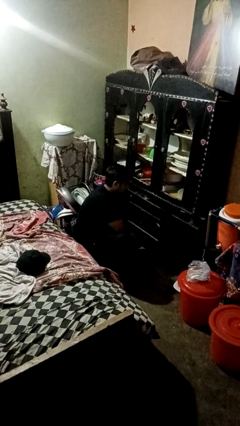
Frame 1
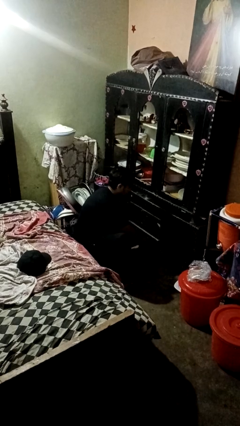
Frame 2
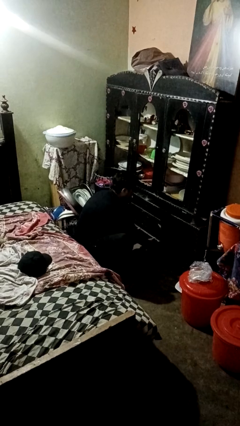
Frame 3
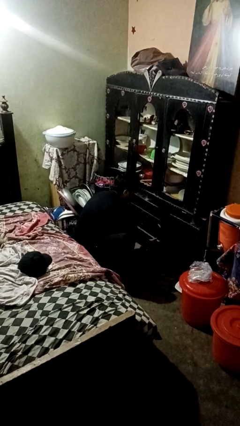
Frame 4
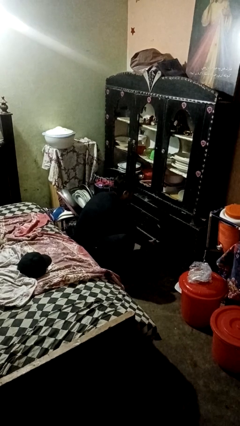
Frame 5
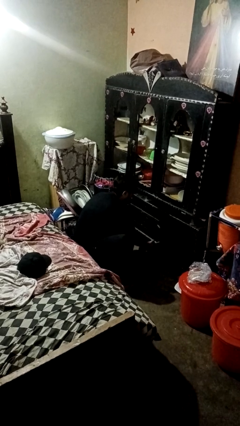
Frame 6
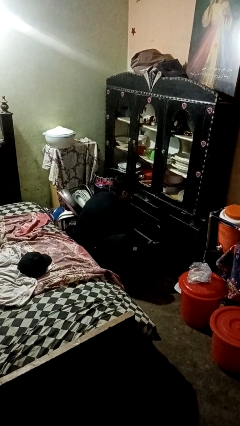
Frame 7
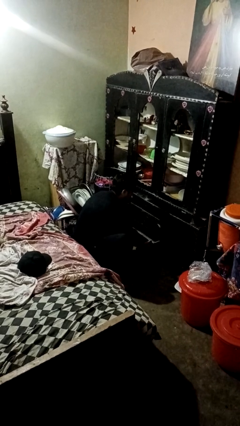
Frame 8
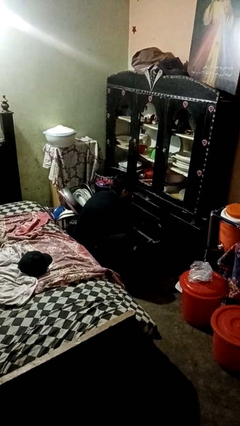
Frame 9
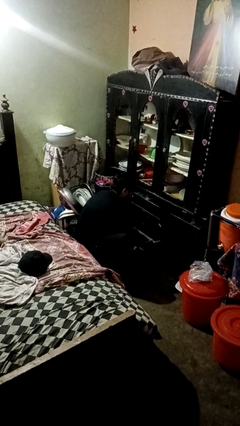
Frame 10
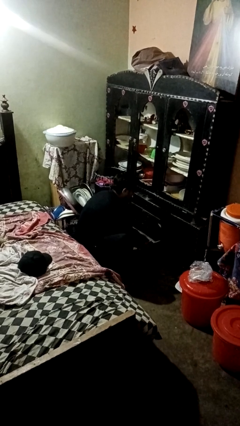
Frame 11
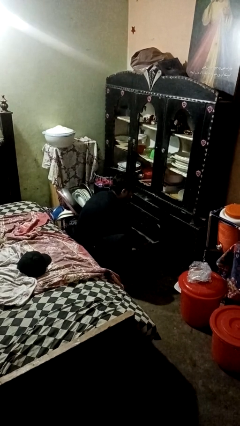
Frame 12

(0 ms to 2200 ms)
person opens kitchen drawer

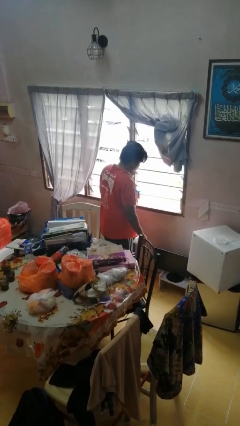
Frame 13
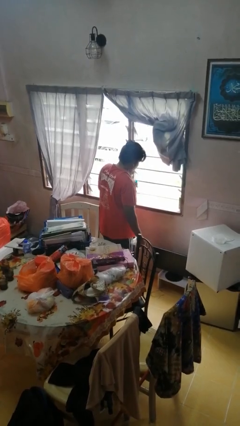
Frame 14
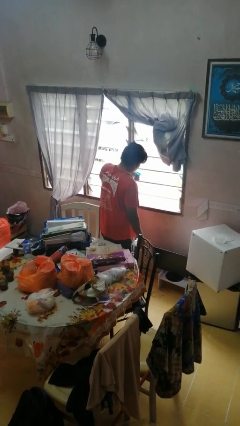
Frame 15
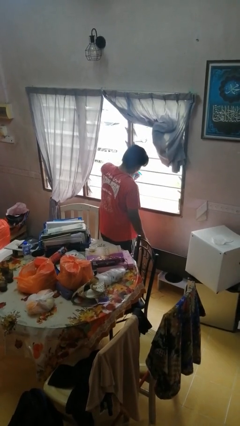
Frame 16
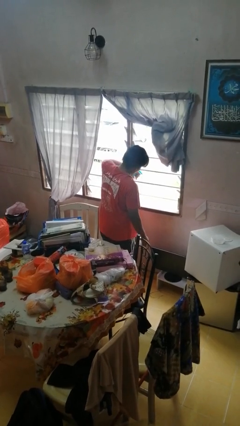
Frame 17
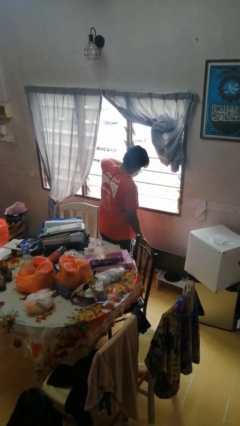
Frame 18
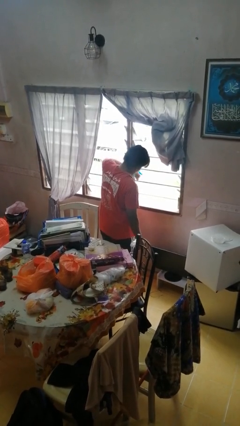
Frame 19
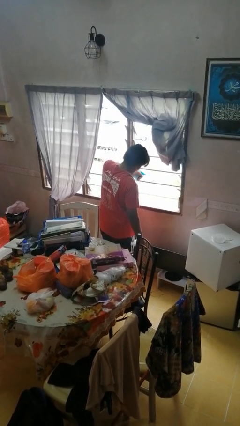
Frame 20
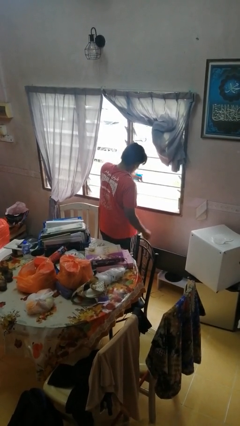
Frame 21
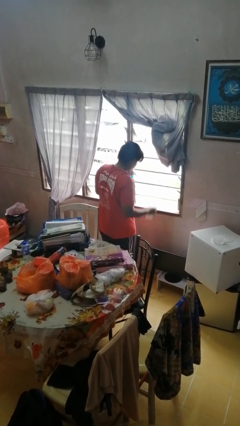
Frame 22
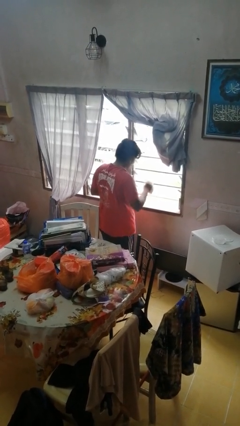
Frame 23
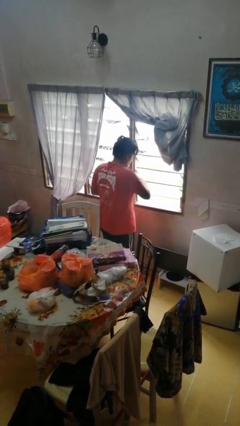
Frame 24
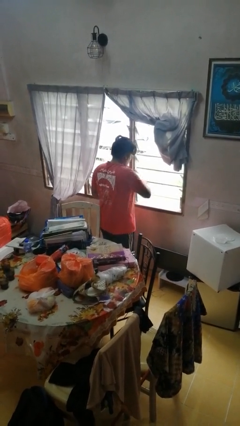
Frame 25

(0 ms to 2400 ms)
person sprays from bottle

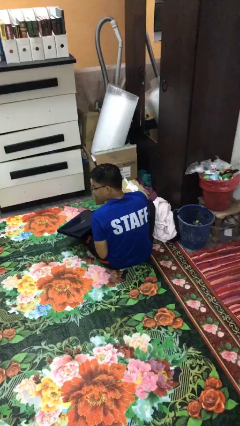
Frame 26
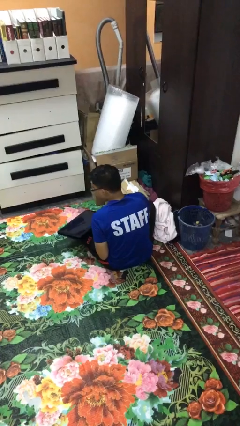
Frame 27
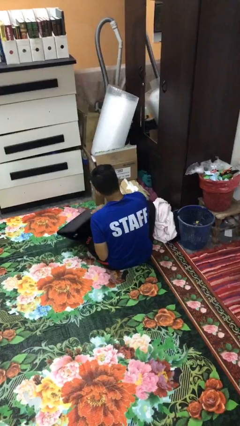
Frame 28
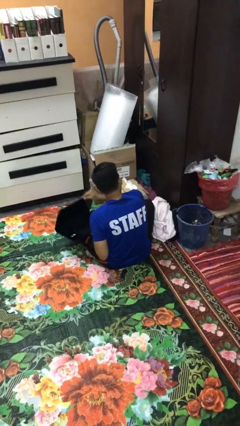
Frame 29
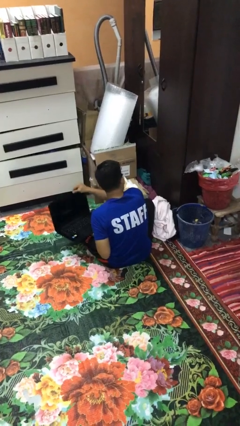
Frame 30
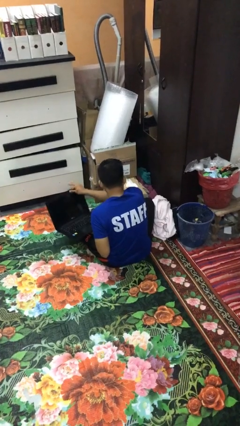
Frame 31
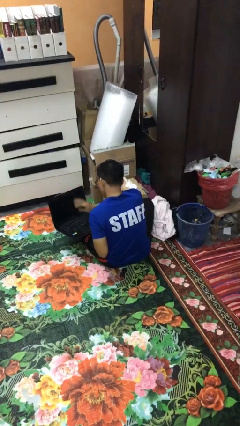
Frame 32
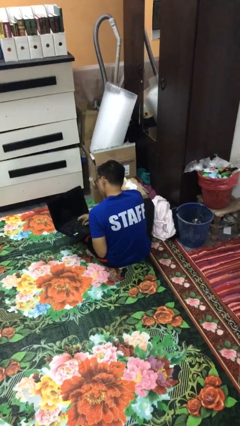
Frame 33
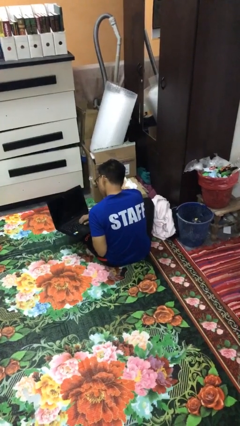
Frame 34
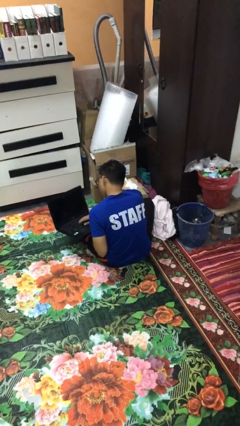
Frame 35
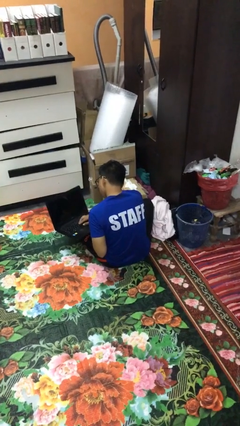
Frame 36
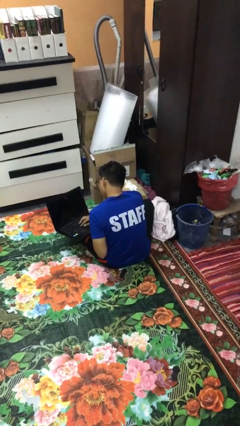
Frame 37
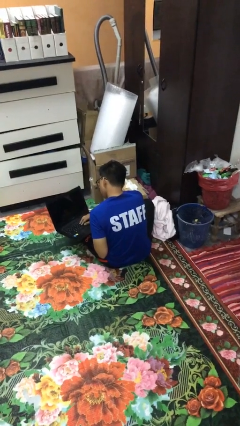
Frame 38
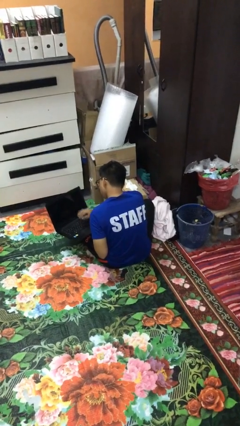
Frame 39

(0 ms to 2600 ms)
person opens laptop

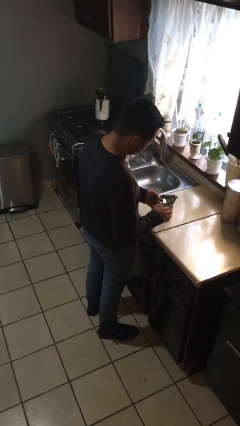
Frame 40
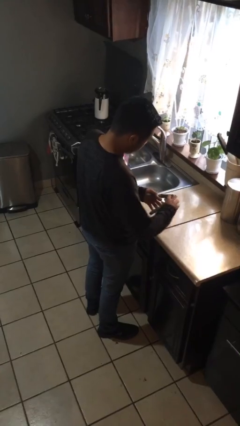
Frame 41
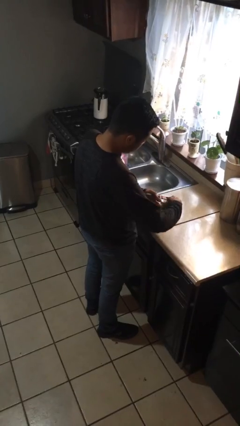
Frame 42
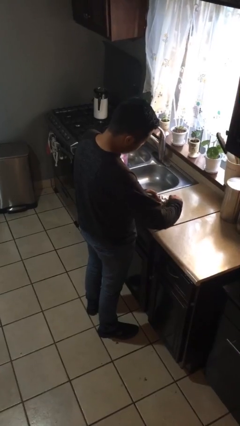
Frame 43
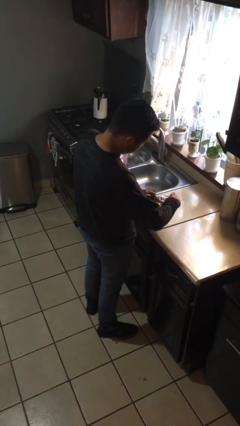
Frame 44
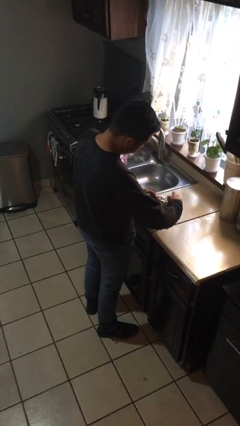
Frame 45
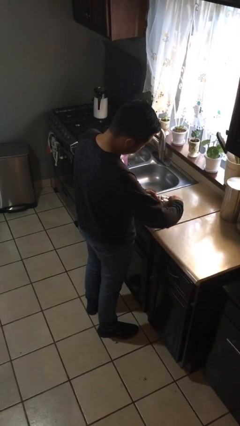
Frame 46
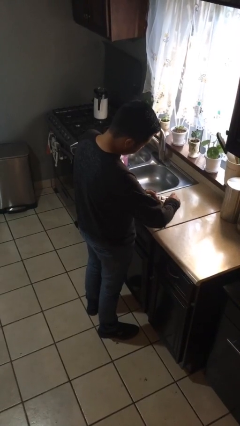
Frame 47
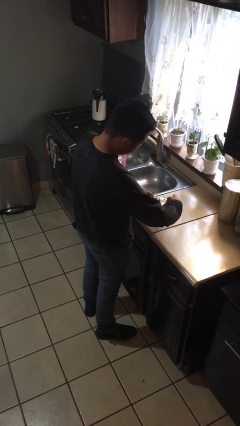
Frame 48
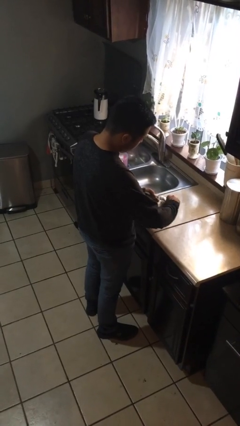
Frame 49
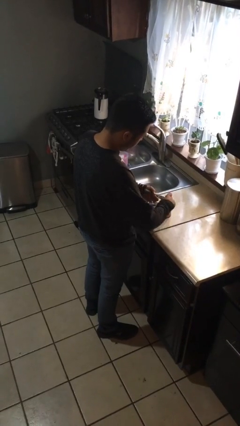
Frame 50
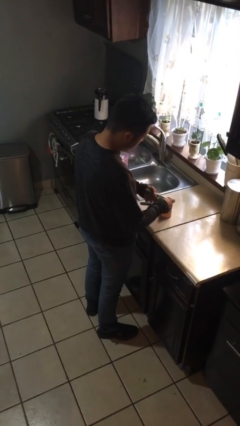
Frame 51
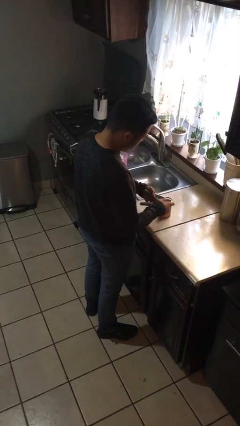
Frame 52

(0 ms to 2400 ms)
person opens can with can opener

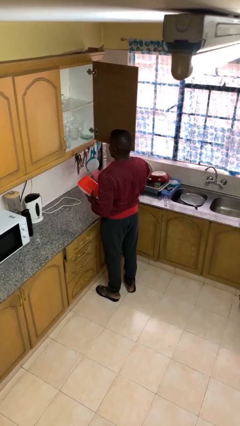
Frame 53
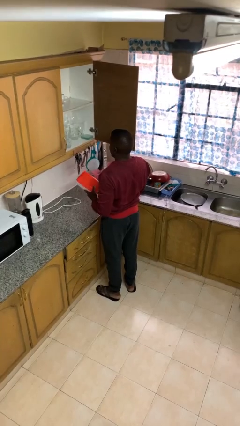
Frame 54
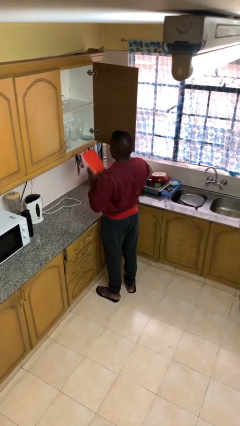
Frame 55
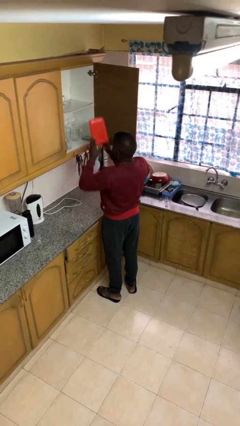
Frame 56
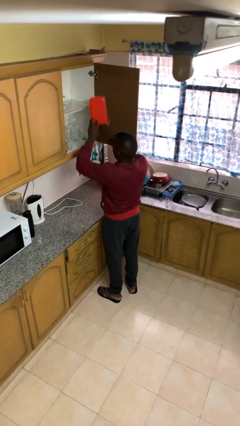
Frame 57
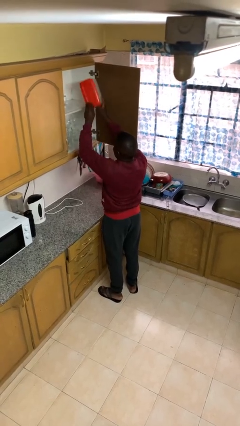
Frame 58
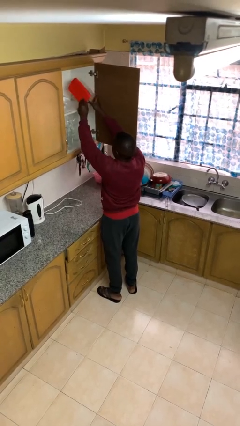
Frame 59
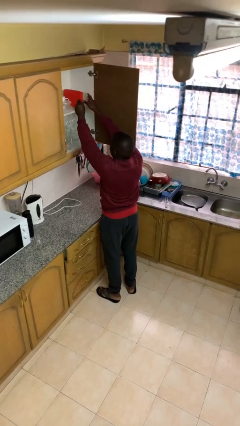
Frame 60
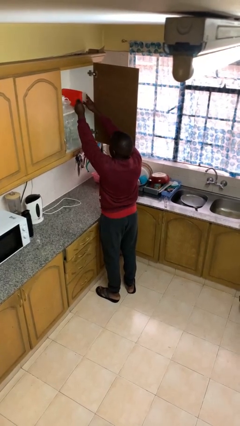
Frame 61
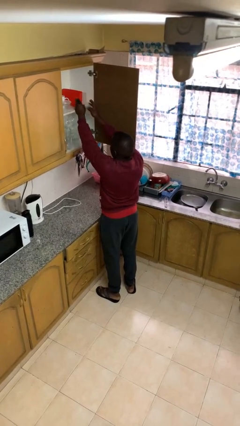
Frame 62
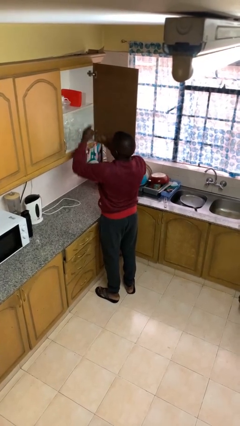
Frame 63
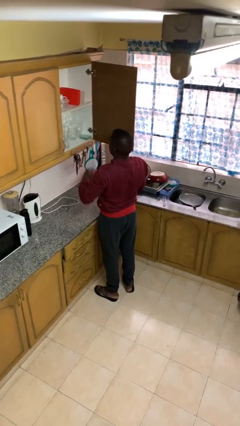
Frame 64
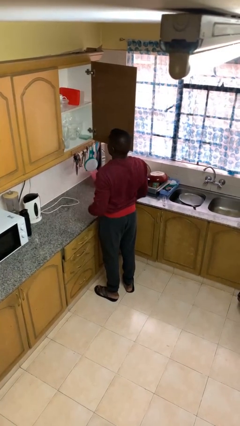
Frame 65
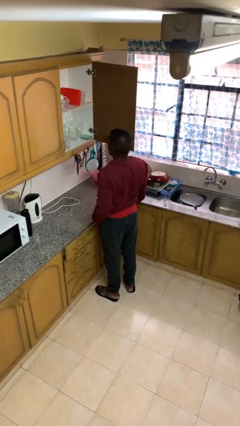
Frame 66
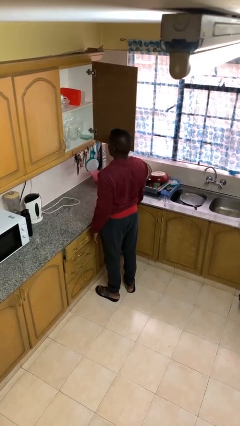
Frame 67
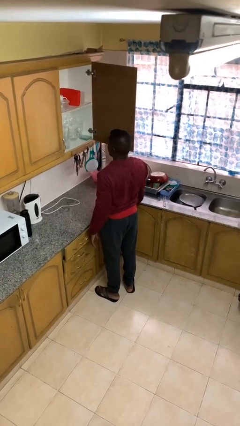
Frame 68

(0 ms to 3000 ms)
person puts down object into cabinet

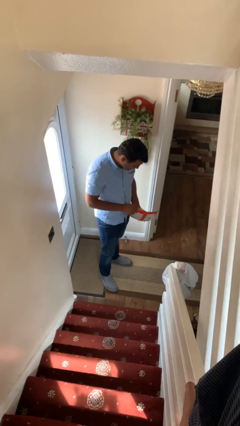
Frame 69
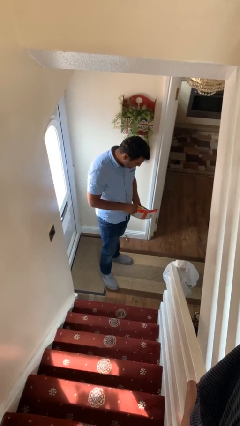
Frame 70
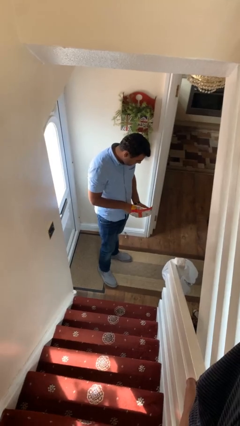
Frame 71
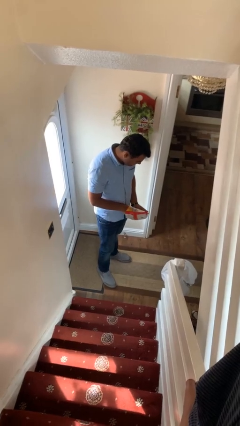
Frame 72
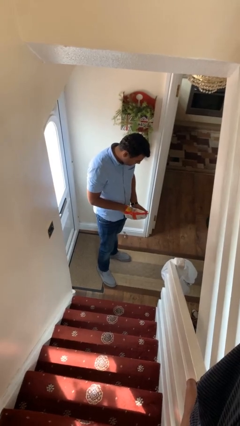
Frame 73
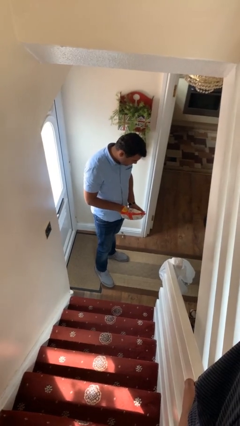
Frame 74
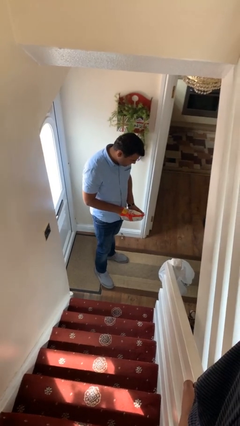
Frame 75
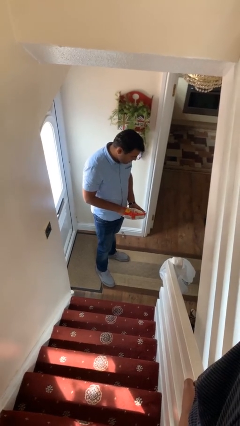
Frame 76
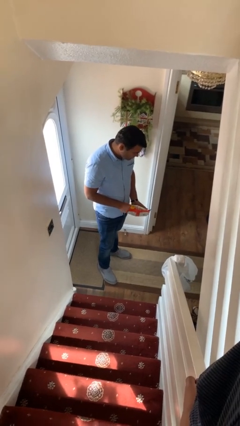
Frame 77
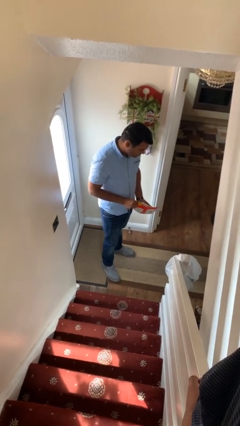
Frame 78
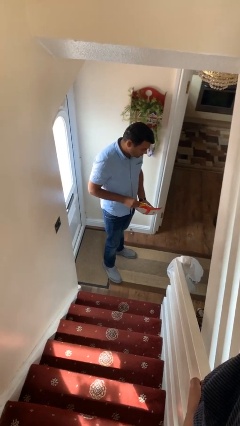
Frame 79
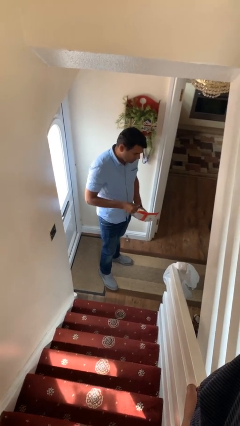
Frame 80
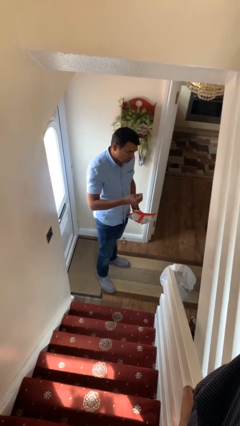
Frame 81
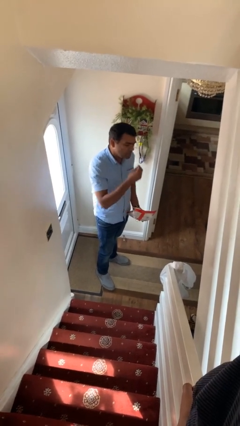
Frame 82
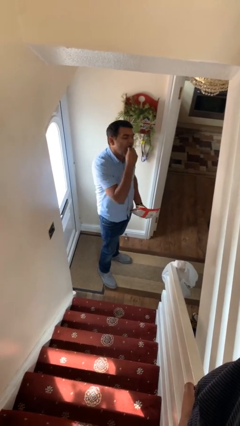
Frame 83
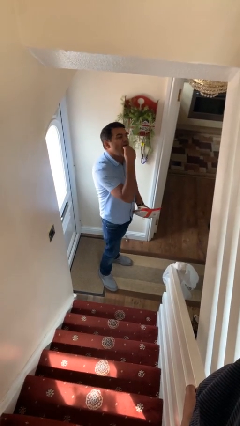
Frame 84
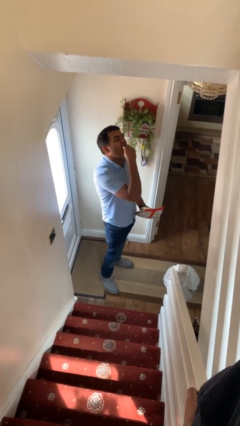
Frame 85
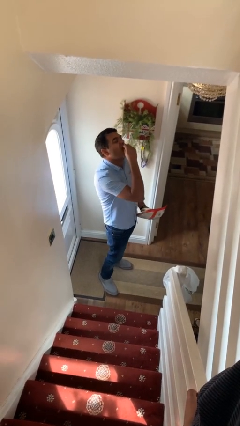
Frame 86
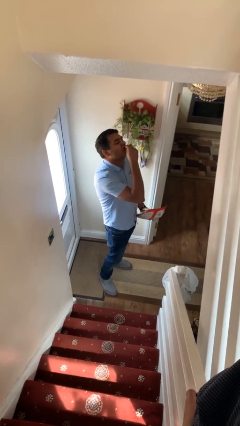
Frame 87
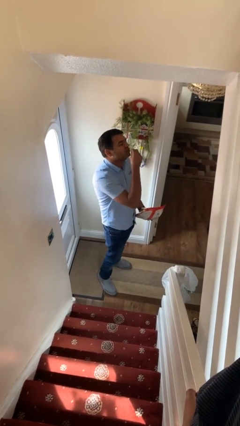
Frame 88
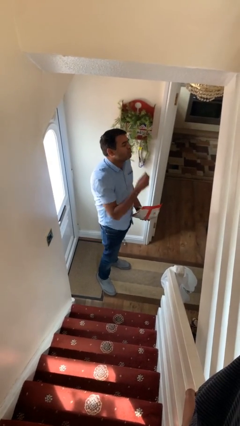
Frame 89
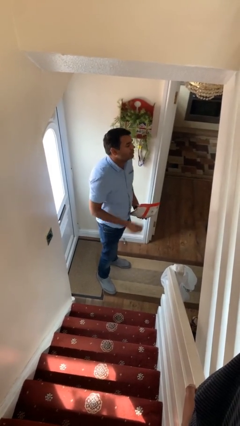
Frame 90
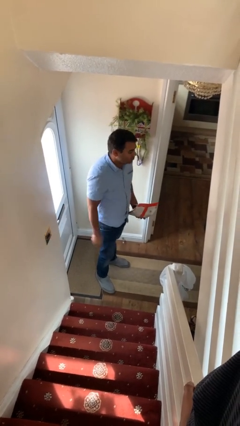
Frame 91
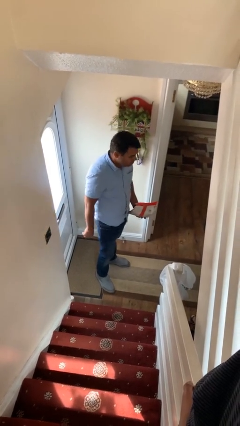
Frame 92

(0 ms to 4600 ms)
person eats snack from bag

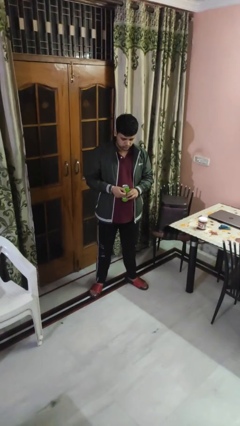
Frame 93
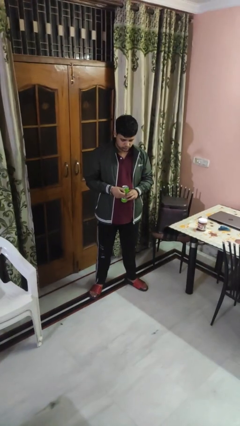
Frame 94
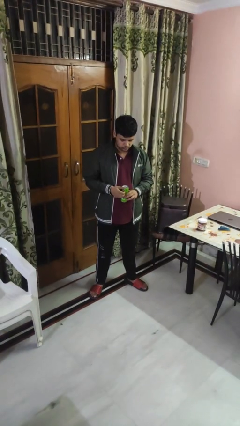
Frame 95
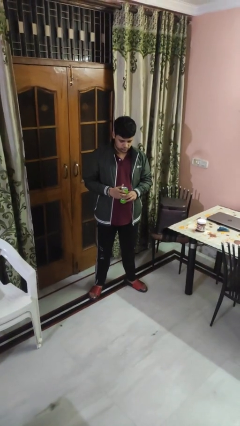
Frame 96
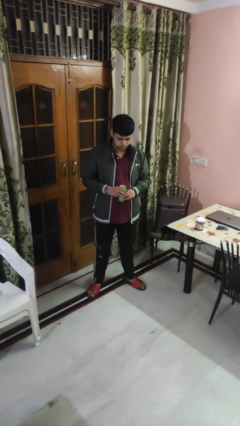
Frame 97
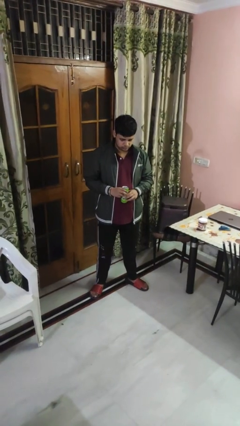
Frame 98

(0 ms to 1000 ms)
person opens beverage can
